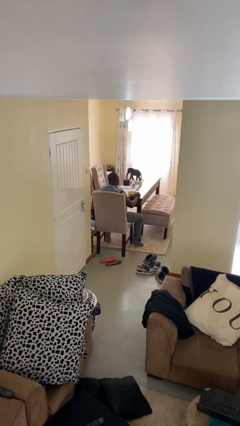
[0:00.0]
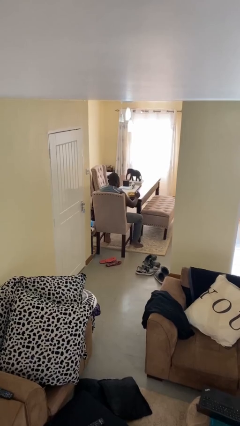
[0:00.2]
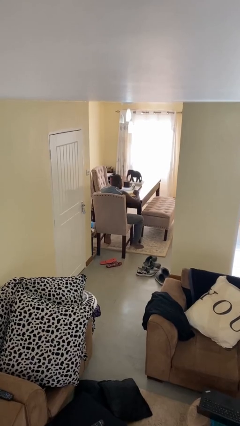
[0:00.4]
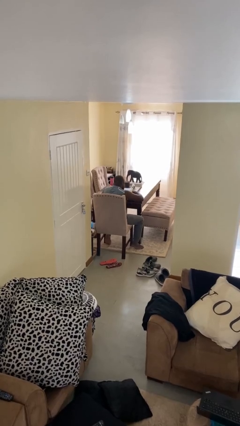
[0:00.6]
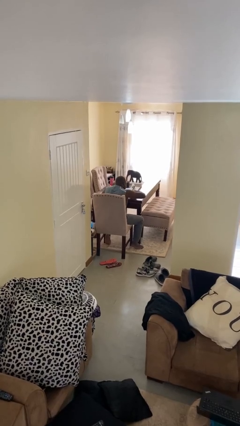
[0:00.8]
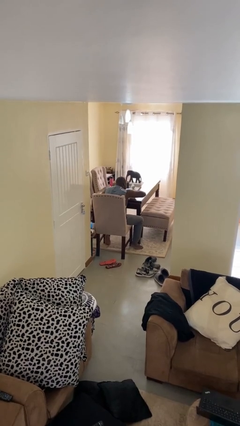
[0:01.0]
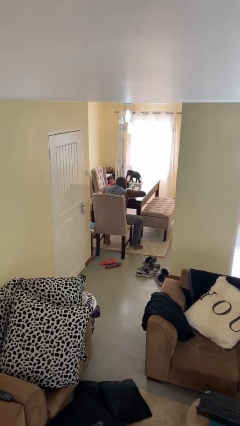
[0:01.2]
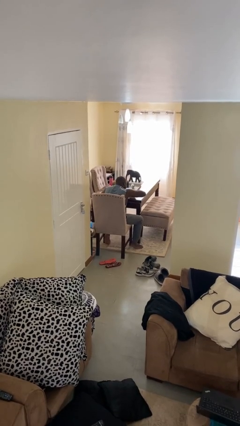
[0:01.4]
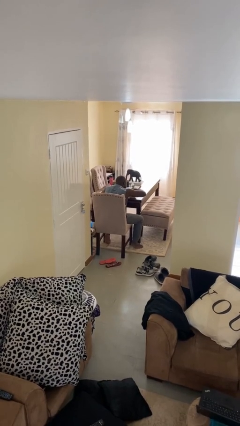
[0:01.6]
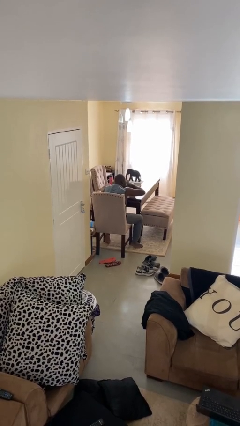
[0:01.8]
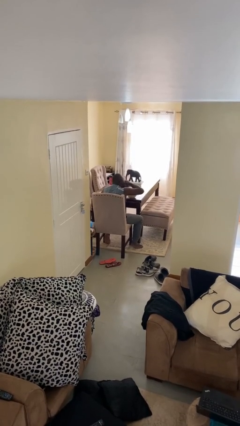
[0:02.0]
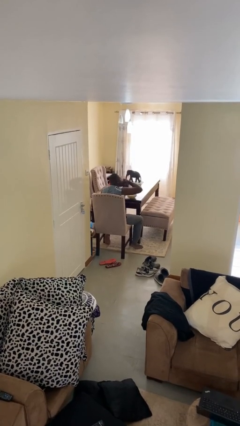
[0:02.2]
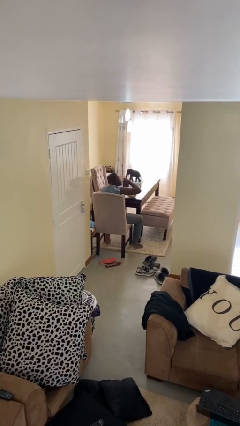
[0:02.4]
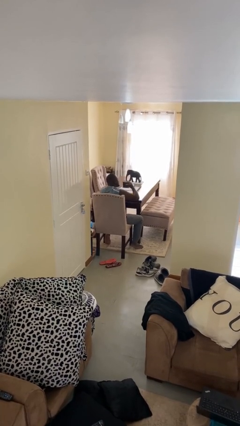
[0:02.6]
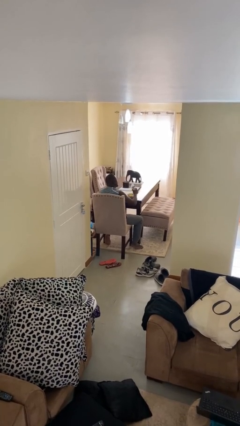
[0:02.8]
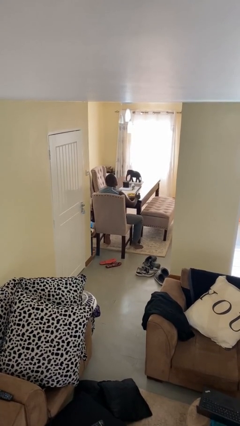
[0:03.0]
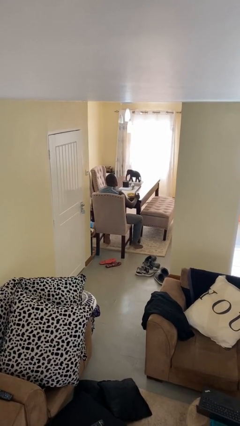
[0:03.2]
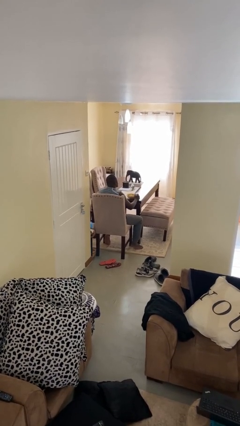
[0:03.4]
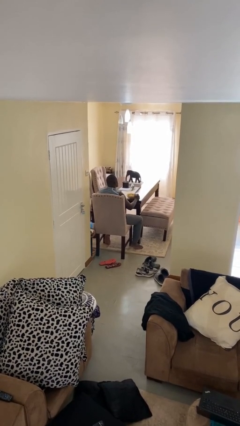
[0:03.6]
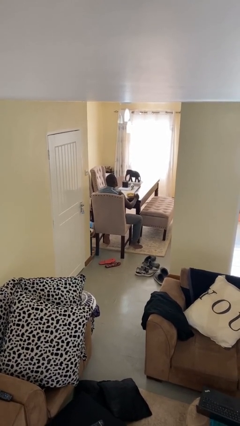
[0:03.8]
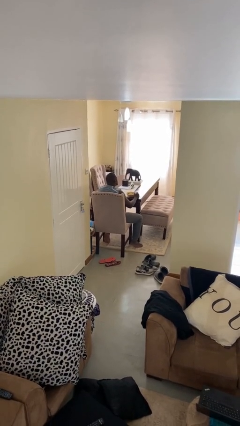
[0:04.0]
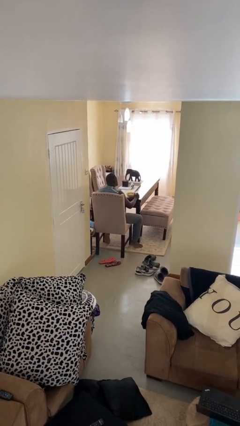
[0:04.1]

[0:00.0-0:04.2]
person eats with hands

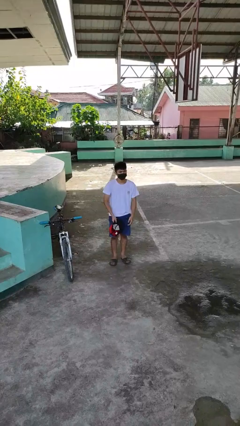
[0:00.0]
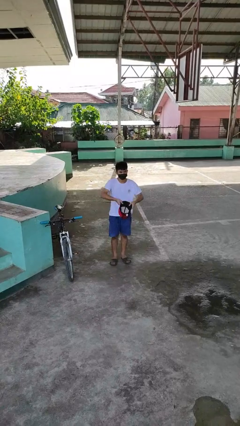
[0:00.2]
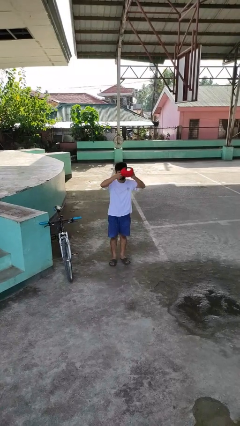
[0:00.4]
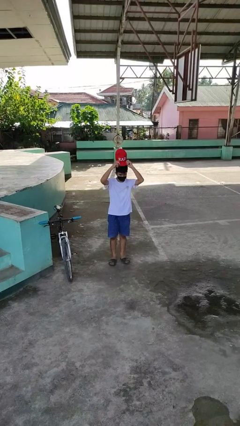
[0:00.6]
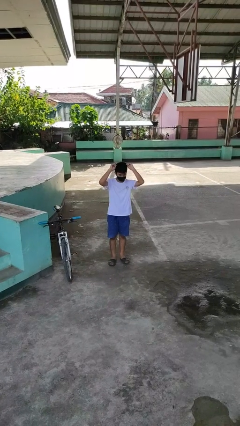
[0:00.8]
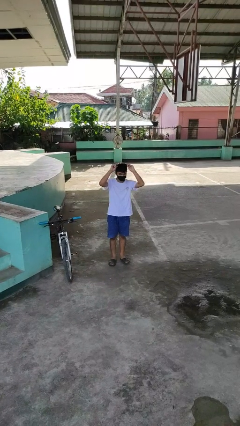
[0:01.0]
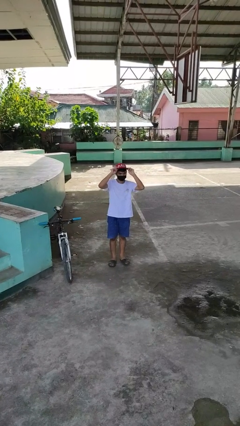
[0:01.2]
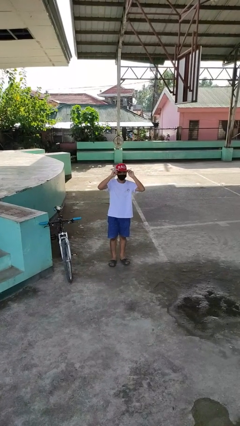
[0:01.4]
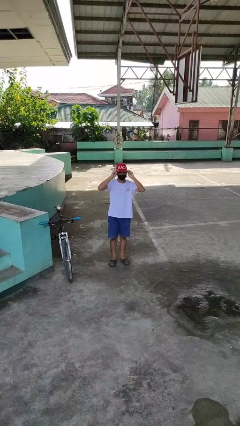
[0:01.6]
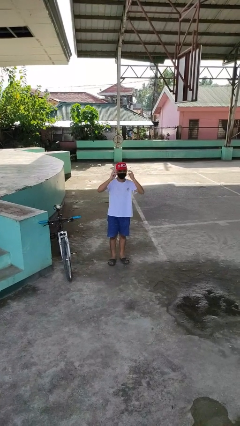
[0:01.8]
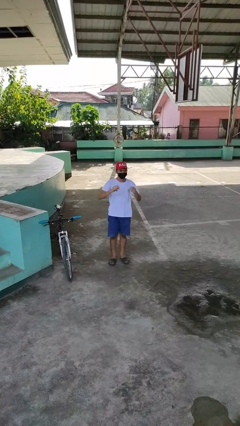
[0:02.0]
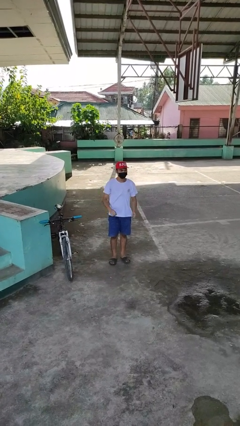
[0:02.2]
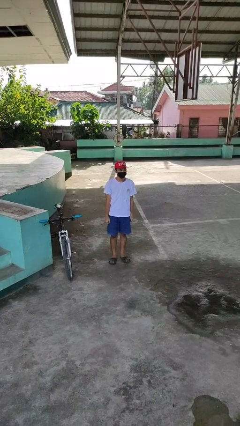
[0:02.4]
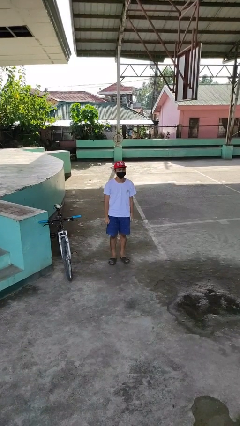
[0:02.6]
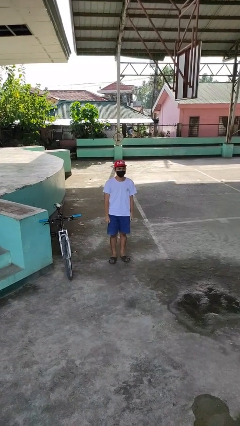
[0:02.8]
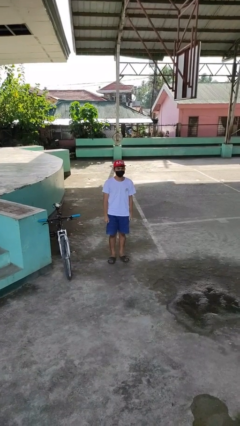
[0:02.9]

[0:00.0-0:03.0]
person puts on hat

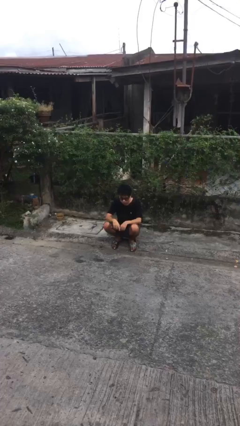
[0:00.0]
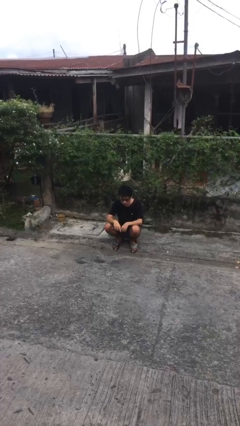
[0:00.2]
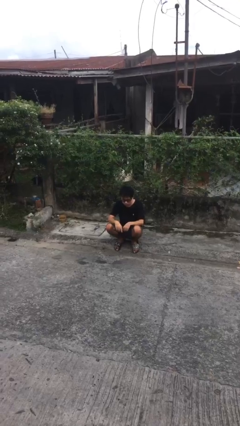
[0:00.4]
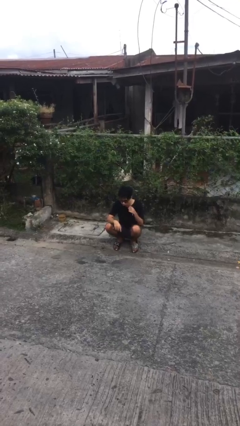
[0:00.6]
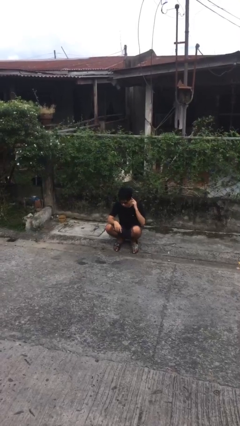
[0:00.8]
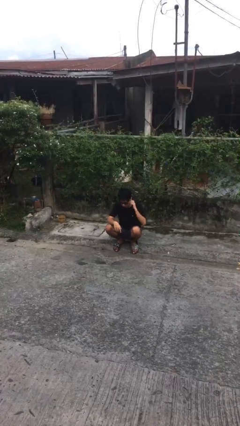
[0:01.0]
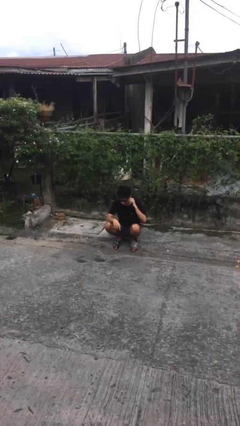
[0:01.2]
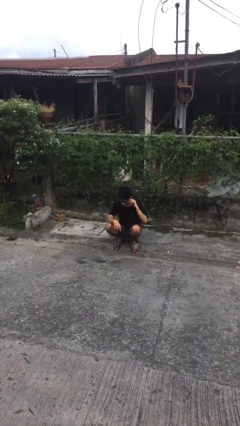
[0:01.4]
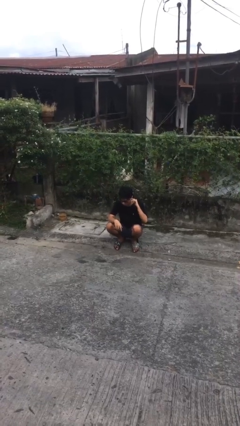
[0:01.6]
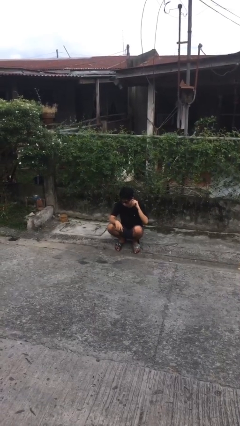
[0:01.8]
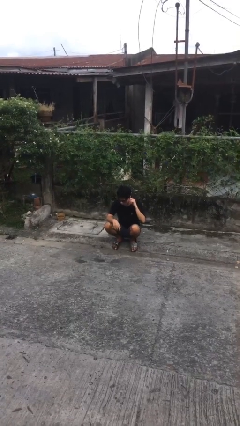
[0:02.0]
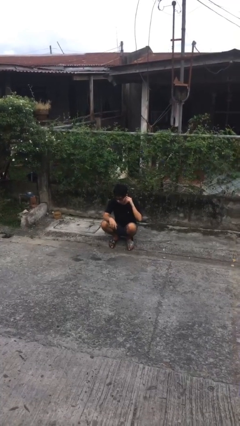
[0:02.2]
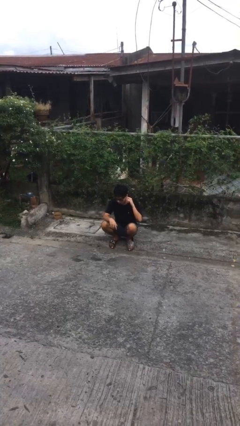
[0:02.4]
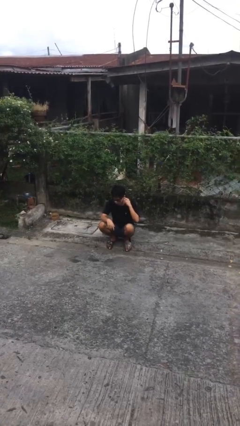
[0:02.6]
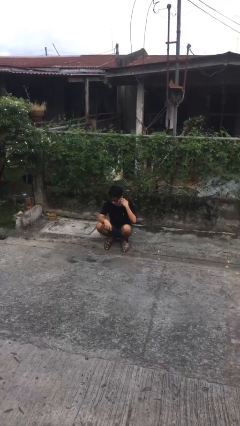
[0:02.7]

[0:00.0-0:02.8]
person touches earlobe

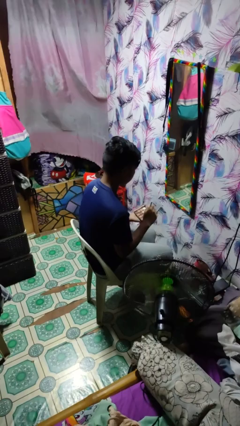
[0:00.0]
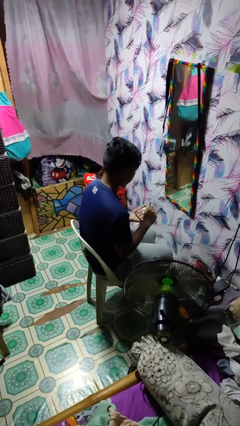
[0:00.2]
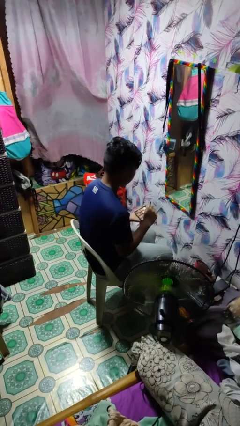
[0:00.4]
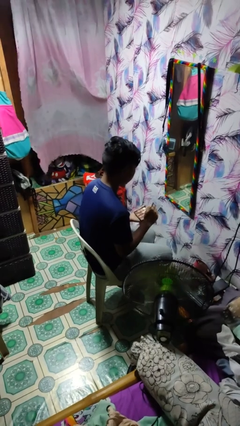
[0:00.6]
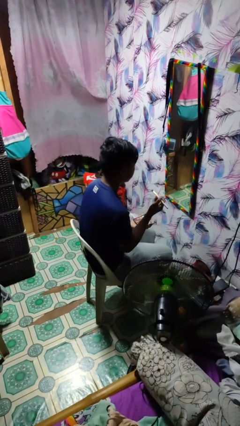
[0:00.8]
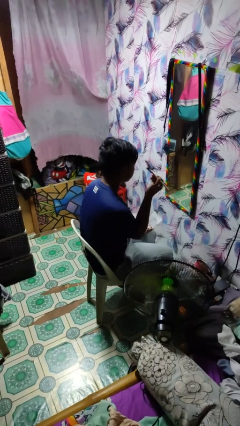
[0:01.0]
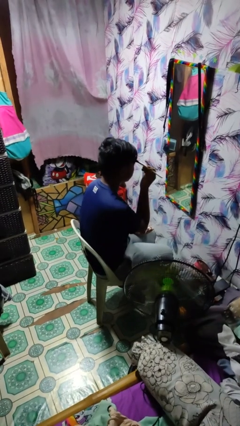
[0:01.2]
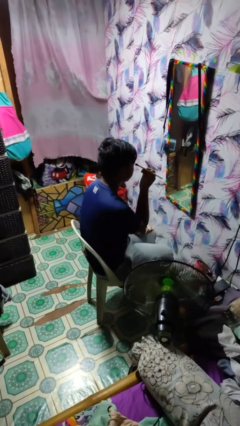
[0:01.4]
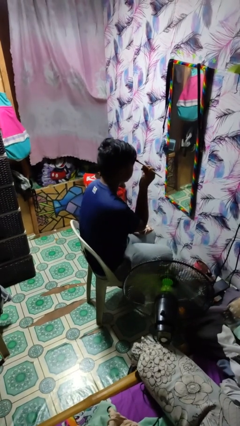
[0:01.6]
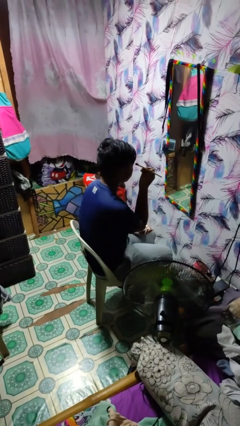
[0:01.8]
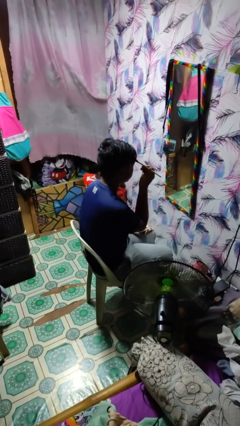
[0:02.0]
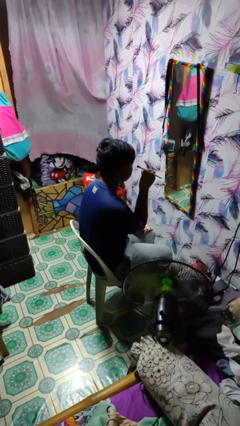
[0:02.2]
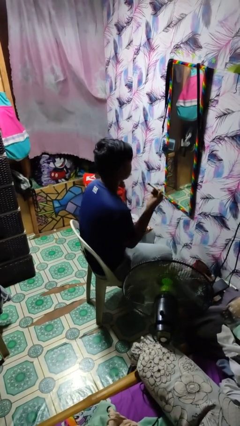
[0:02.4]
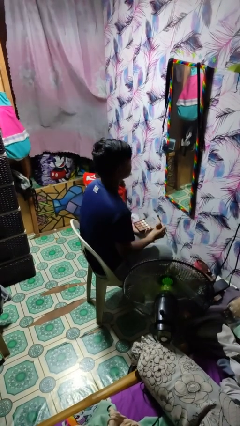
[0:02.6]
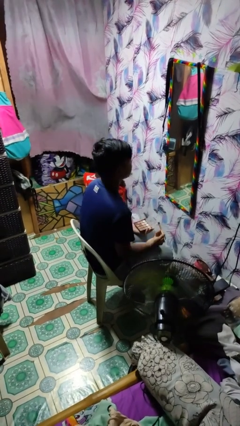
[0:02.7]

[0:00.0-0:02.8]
person applies eye makeup

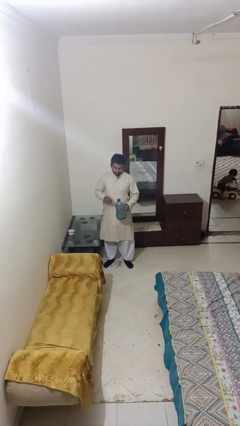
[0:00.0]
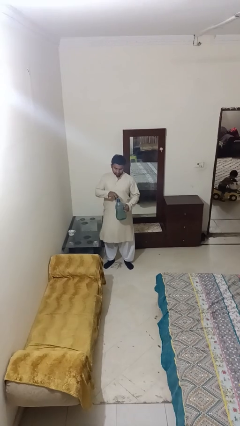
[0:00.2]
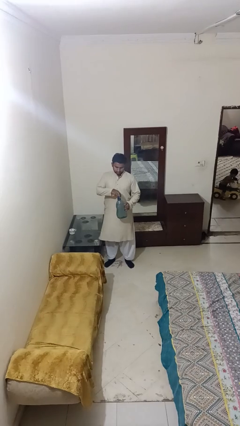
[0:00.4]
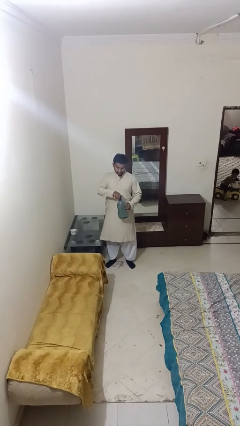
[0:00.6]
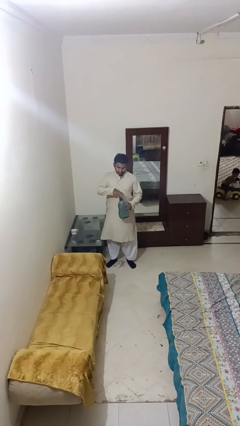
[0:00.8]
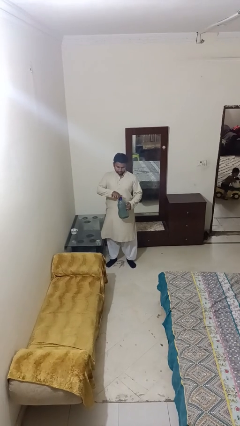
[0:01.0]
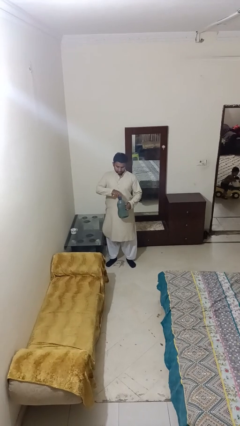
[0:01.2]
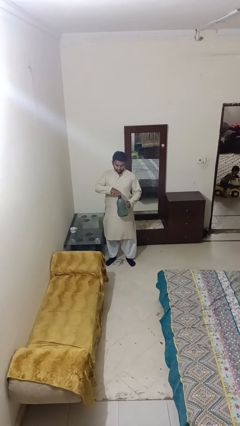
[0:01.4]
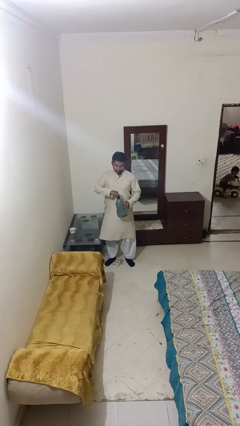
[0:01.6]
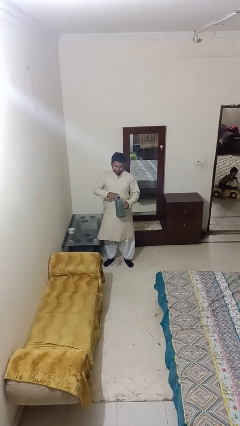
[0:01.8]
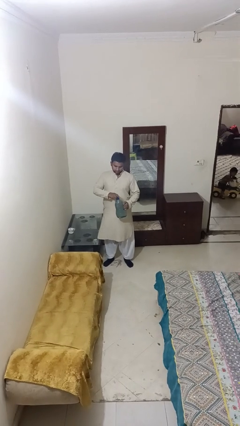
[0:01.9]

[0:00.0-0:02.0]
person screws lid to bottle

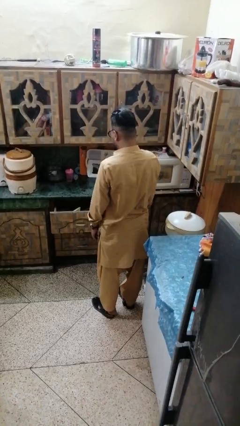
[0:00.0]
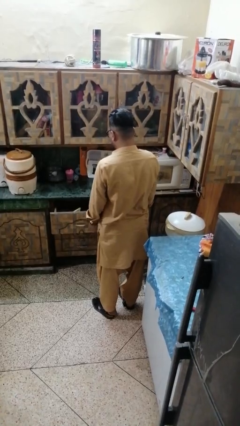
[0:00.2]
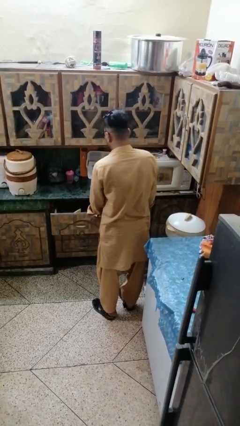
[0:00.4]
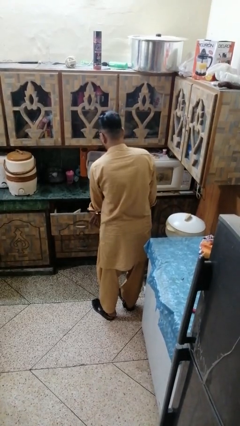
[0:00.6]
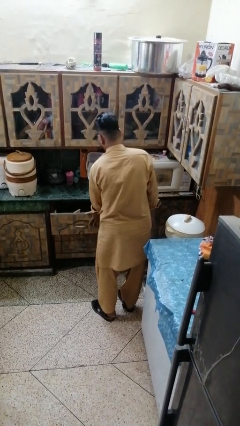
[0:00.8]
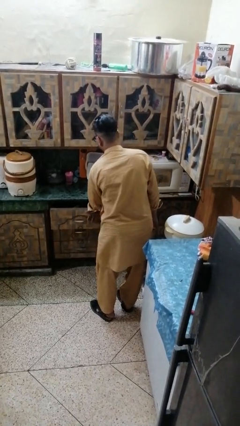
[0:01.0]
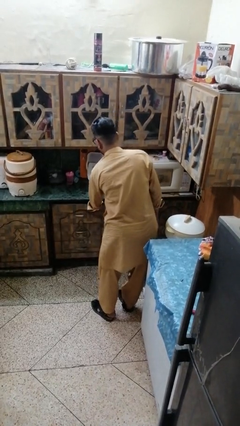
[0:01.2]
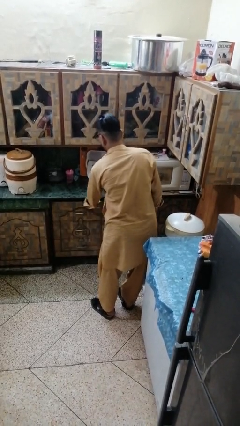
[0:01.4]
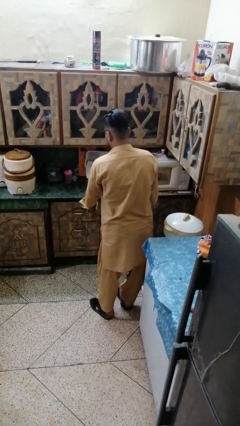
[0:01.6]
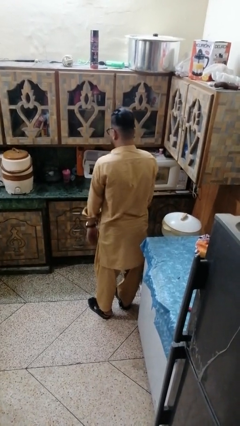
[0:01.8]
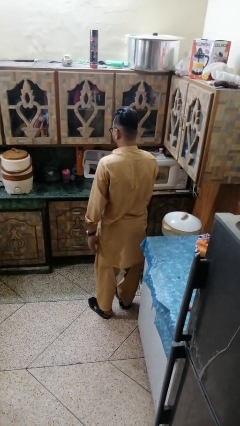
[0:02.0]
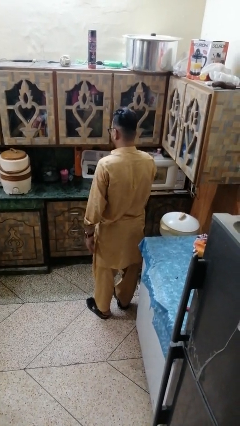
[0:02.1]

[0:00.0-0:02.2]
person closes kitchen drawer

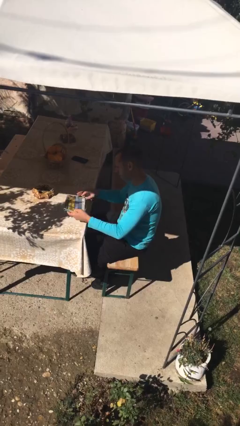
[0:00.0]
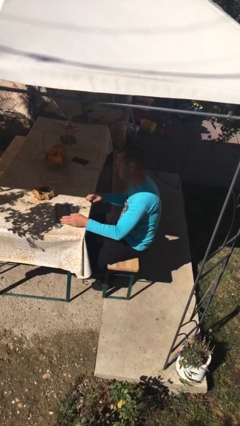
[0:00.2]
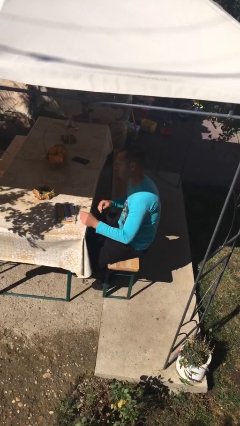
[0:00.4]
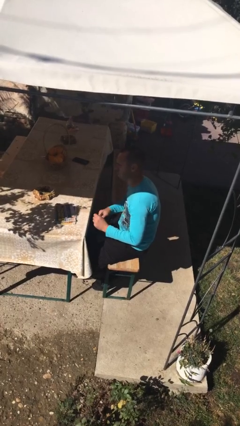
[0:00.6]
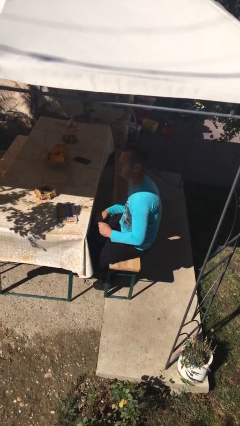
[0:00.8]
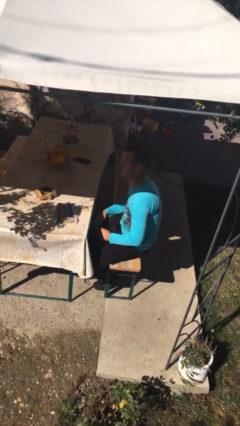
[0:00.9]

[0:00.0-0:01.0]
person puts down object on table
